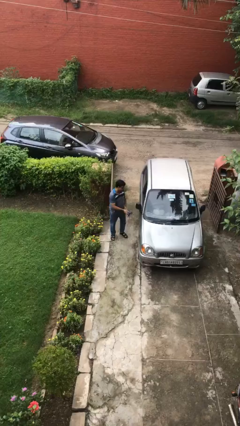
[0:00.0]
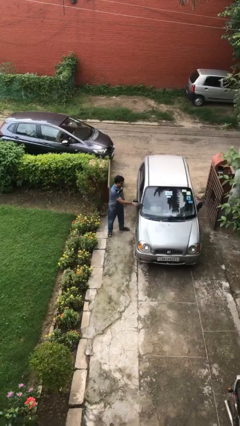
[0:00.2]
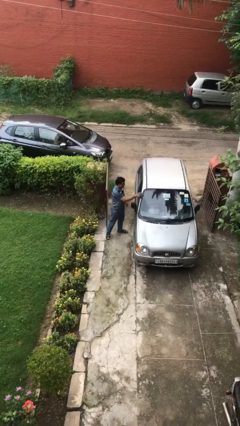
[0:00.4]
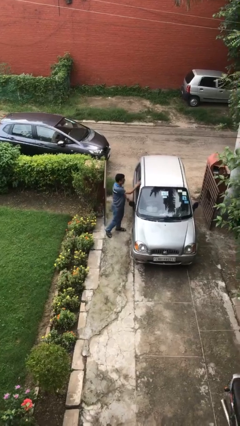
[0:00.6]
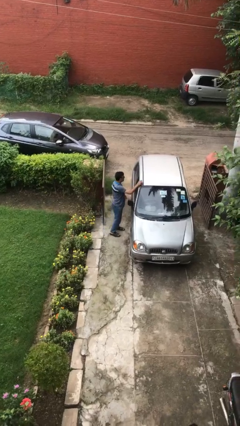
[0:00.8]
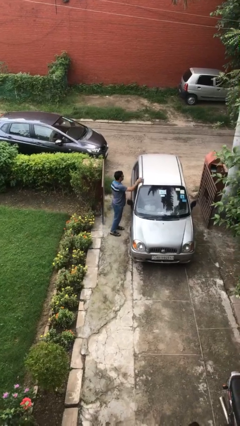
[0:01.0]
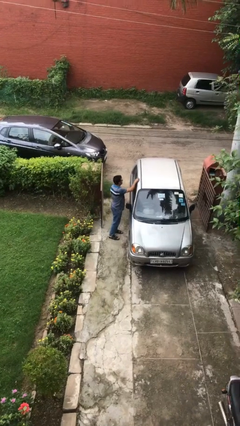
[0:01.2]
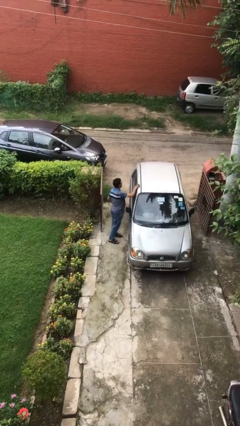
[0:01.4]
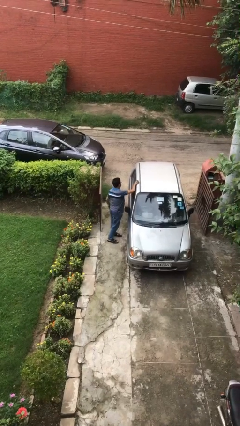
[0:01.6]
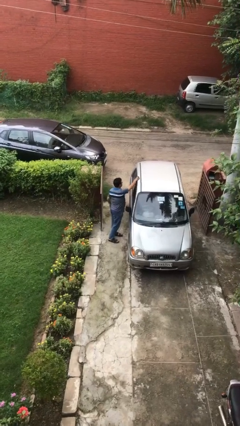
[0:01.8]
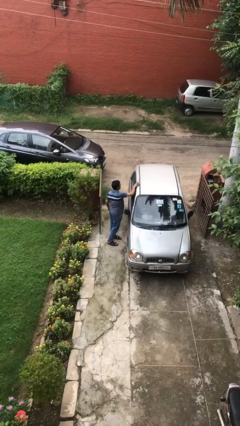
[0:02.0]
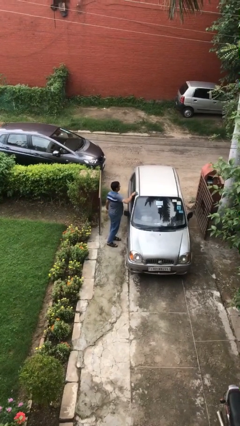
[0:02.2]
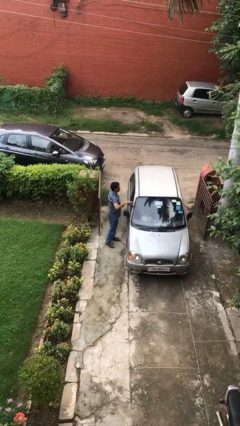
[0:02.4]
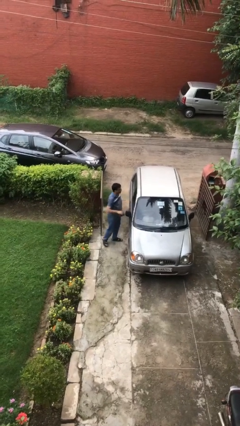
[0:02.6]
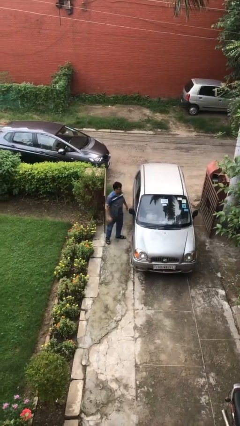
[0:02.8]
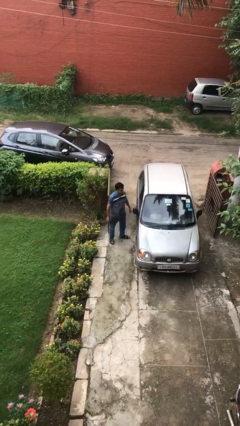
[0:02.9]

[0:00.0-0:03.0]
person polishes car with rag

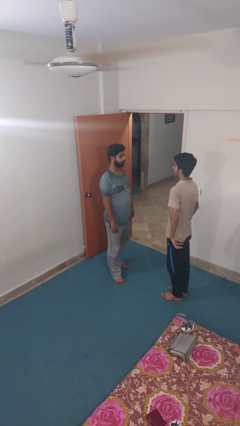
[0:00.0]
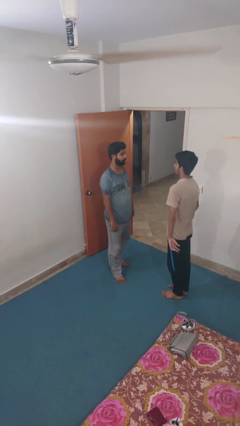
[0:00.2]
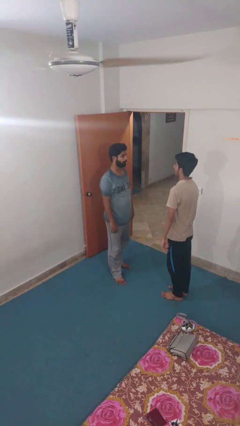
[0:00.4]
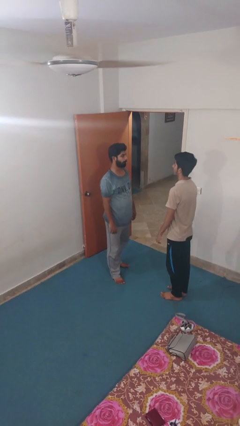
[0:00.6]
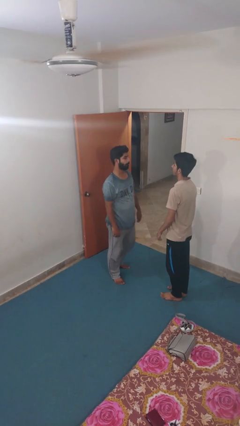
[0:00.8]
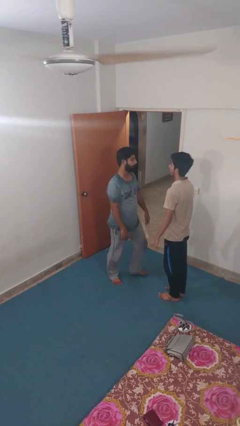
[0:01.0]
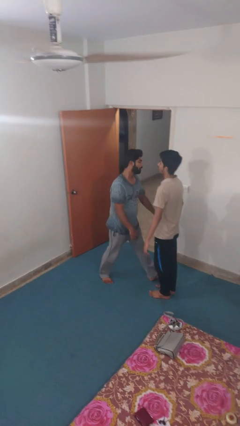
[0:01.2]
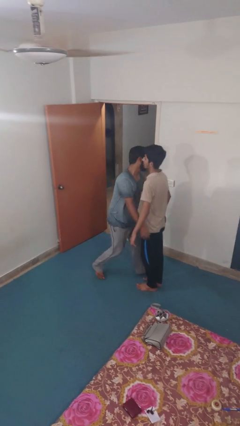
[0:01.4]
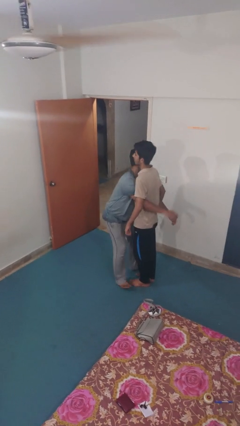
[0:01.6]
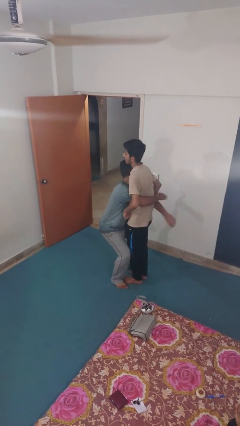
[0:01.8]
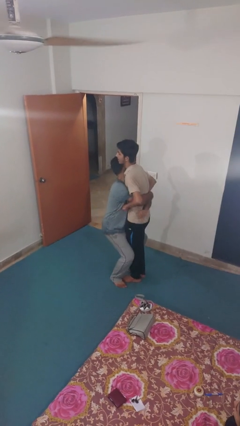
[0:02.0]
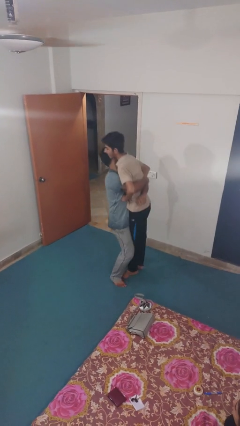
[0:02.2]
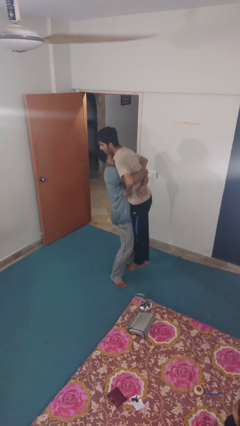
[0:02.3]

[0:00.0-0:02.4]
person picks up person

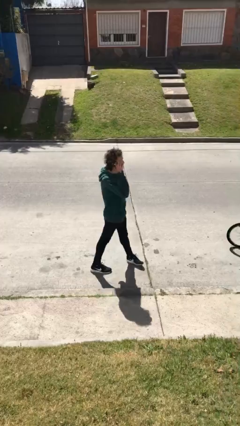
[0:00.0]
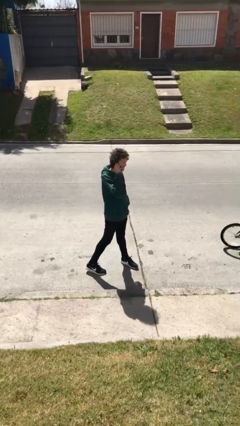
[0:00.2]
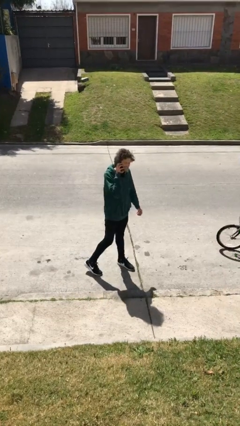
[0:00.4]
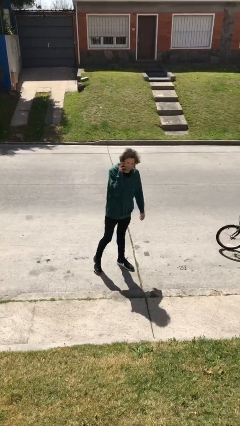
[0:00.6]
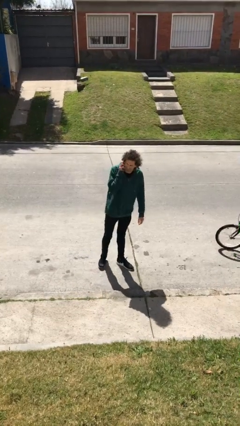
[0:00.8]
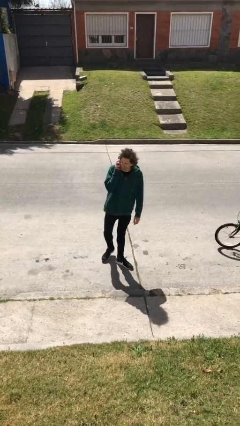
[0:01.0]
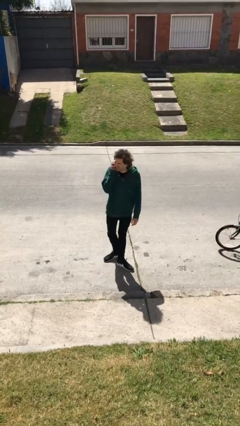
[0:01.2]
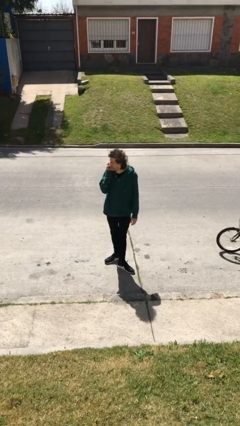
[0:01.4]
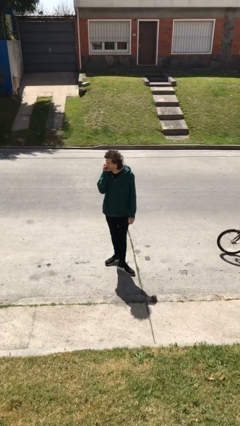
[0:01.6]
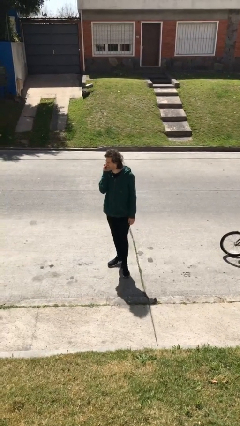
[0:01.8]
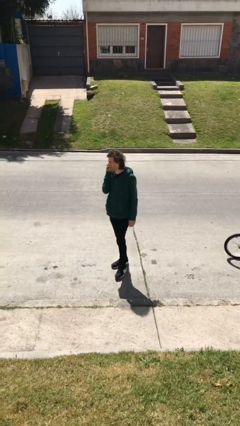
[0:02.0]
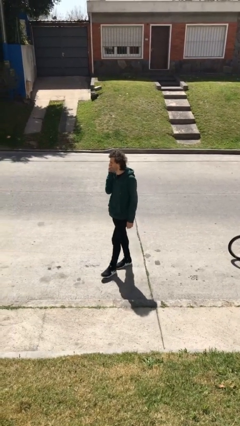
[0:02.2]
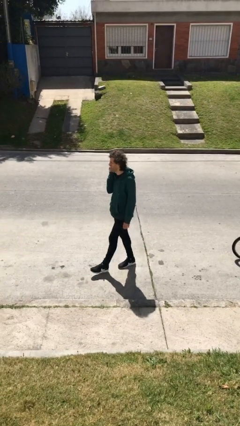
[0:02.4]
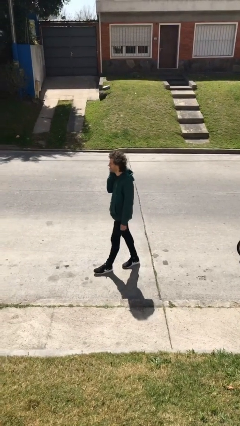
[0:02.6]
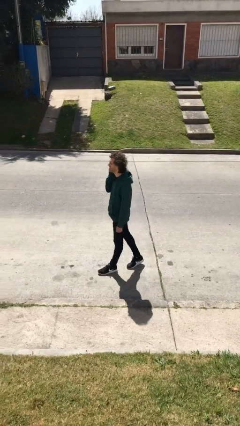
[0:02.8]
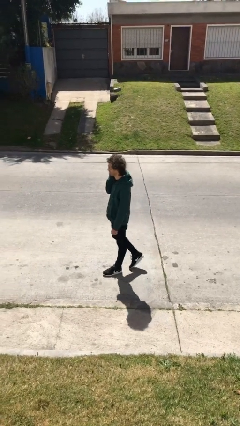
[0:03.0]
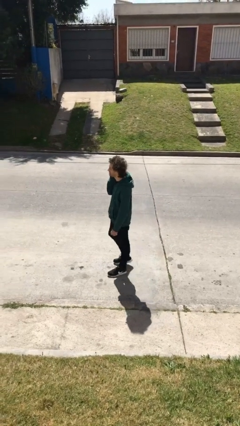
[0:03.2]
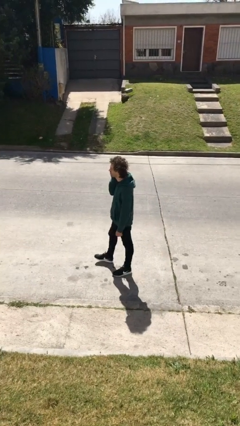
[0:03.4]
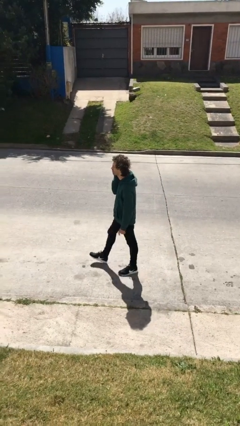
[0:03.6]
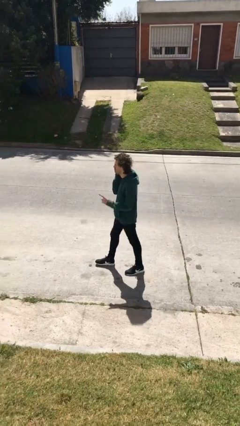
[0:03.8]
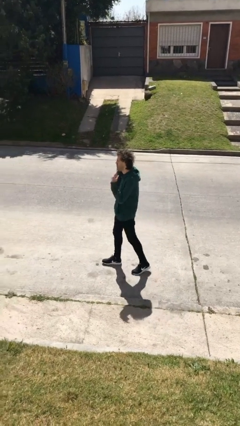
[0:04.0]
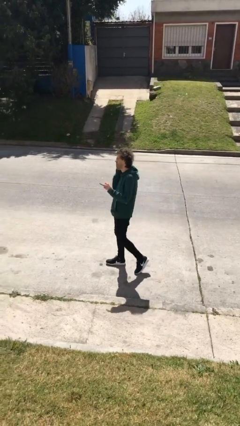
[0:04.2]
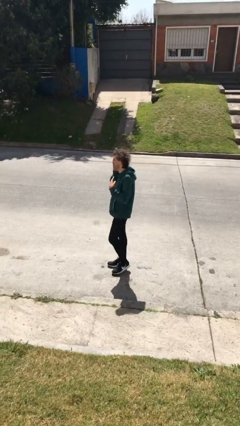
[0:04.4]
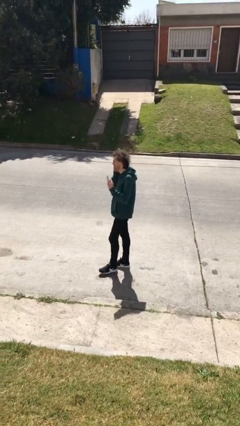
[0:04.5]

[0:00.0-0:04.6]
person talks on phone

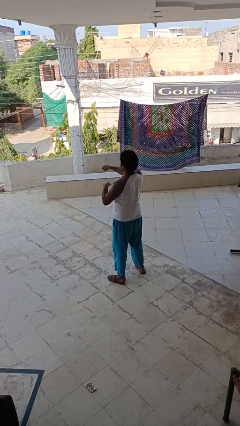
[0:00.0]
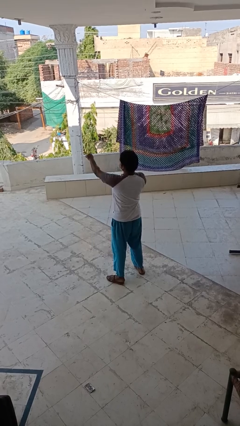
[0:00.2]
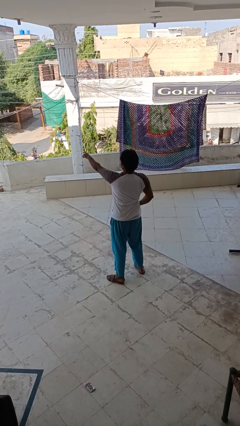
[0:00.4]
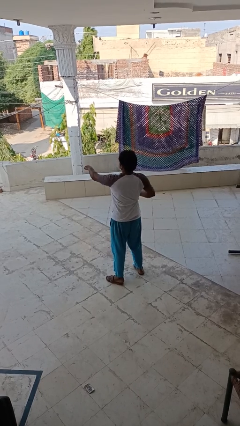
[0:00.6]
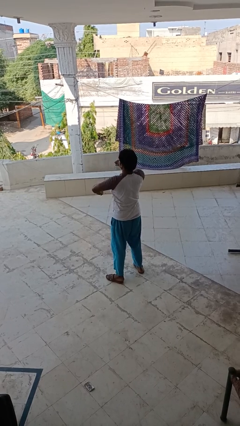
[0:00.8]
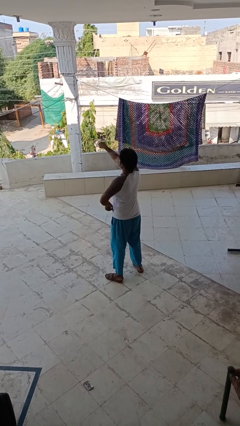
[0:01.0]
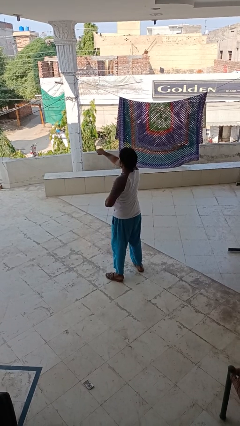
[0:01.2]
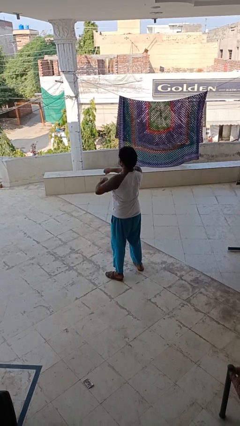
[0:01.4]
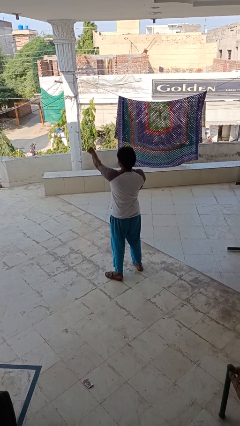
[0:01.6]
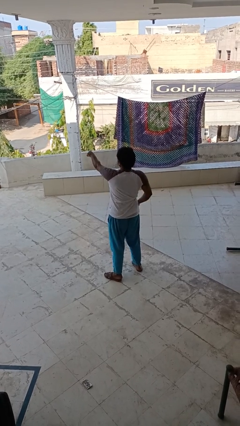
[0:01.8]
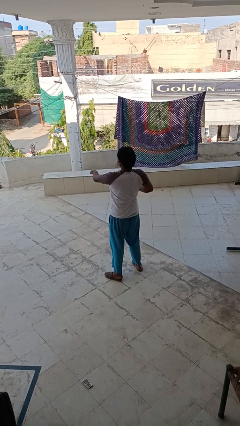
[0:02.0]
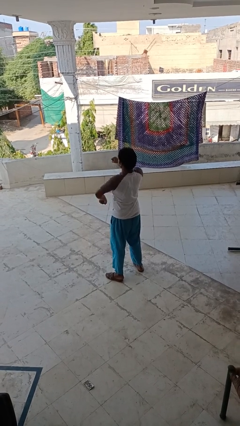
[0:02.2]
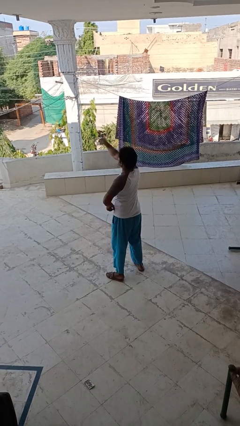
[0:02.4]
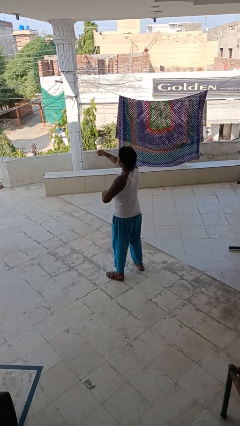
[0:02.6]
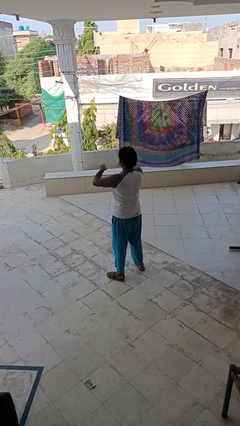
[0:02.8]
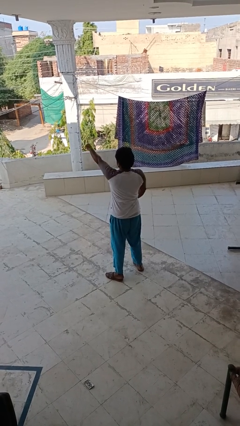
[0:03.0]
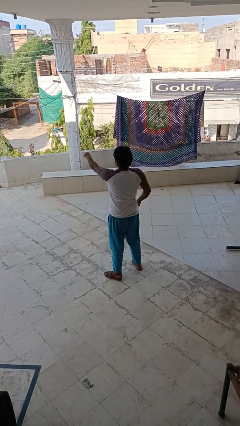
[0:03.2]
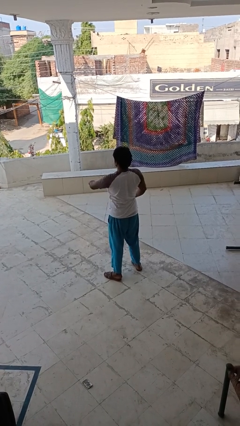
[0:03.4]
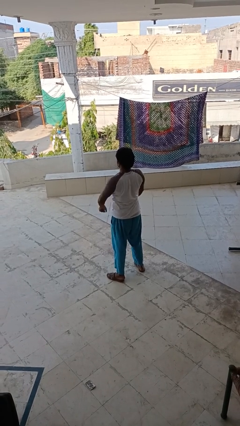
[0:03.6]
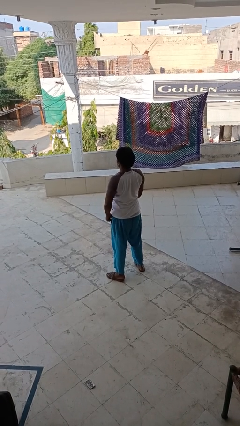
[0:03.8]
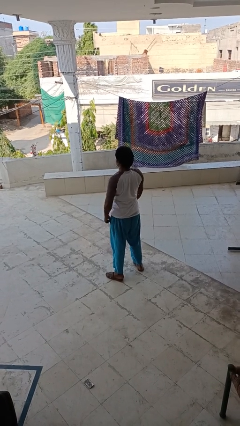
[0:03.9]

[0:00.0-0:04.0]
person punches

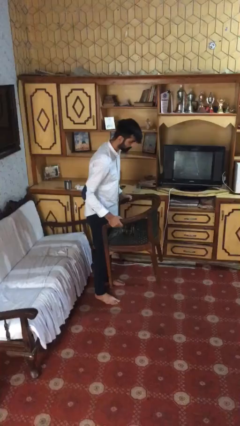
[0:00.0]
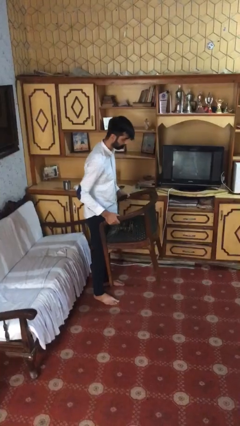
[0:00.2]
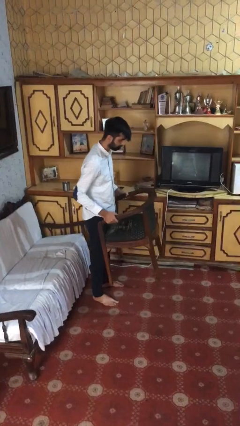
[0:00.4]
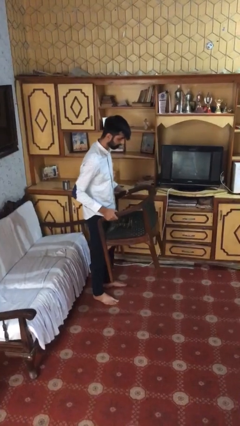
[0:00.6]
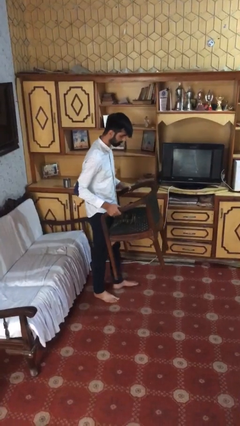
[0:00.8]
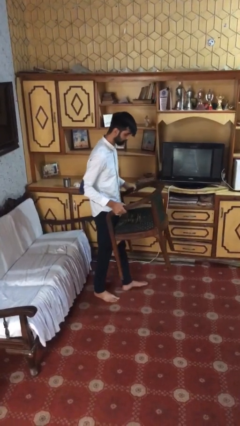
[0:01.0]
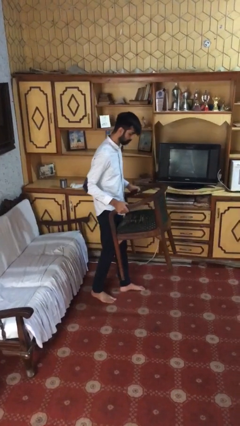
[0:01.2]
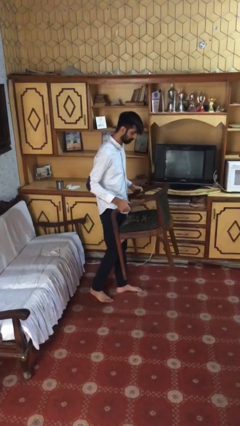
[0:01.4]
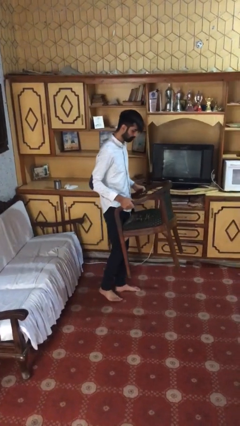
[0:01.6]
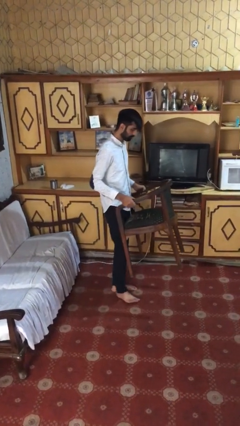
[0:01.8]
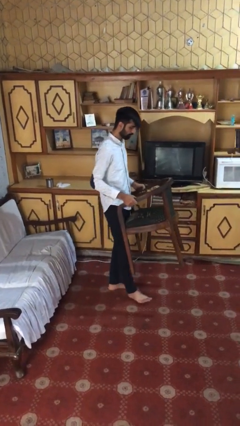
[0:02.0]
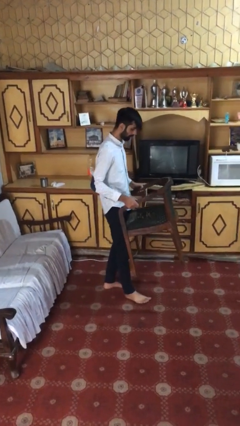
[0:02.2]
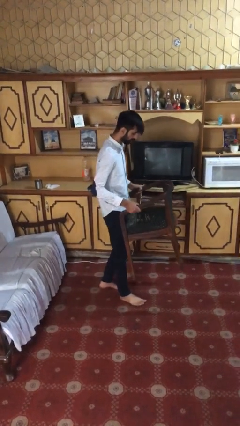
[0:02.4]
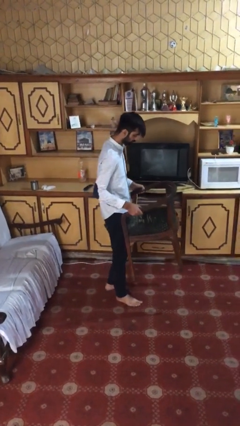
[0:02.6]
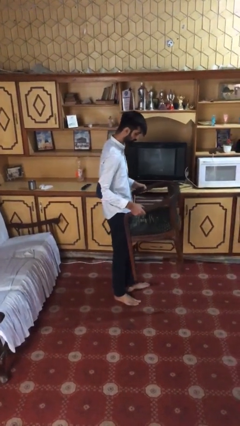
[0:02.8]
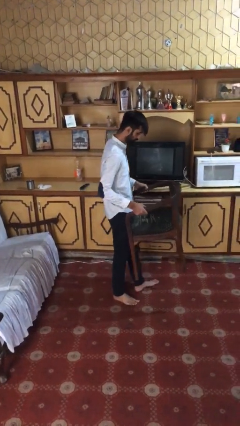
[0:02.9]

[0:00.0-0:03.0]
person carries heavy object

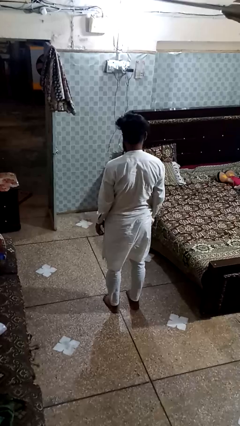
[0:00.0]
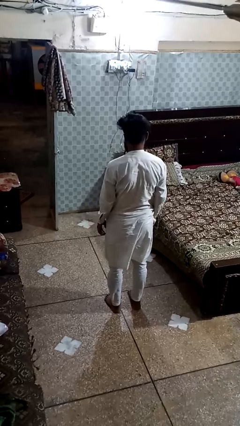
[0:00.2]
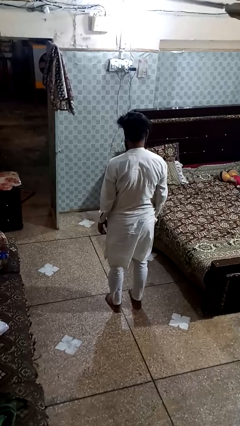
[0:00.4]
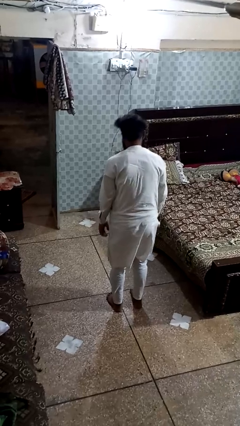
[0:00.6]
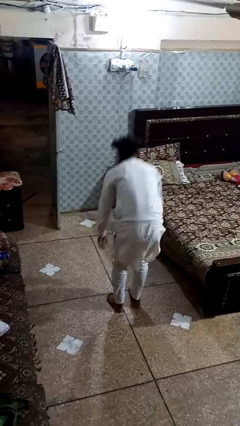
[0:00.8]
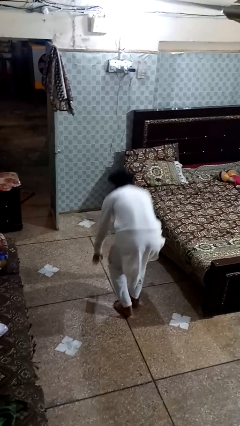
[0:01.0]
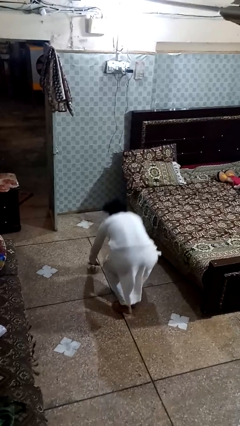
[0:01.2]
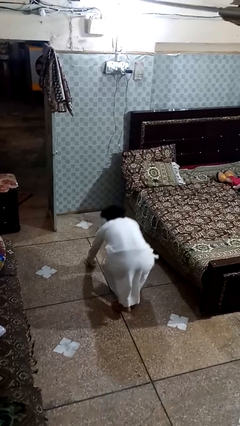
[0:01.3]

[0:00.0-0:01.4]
person exercises with plank
